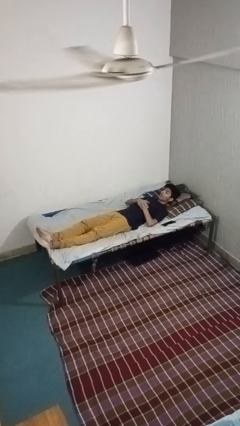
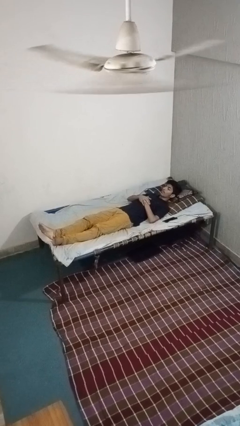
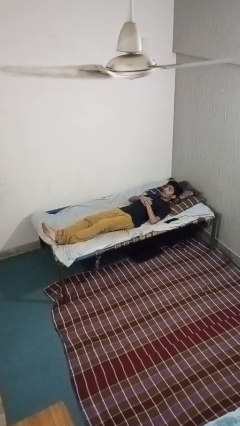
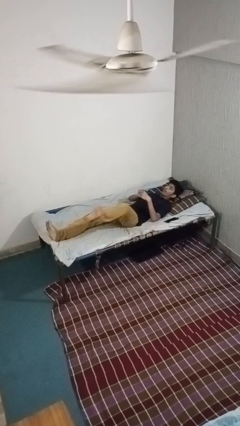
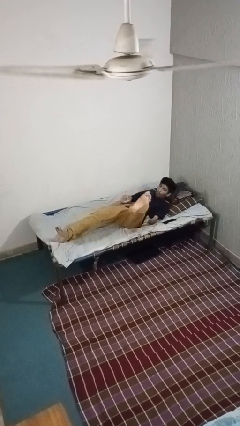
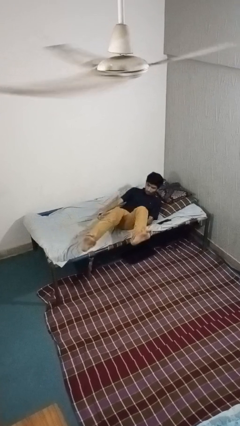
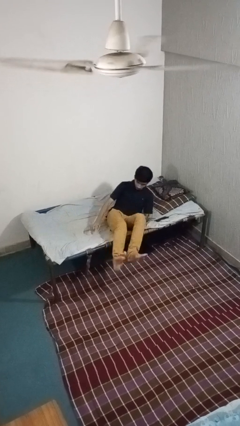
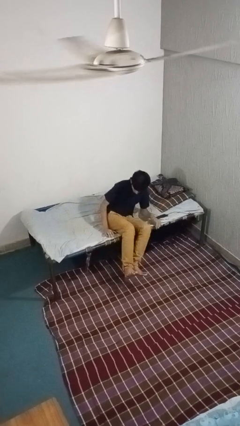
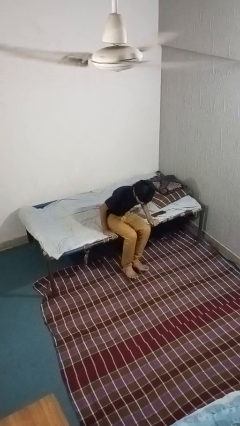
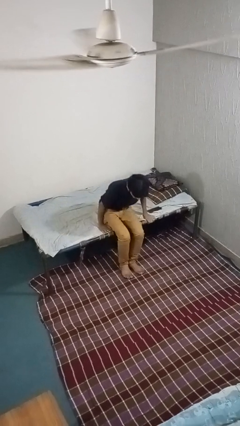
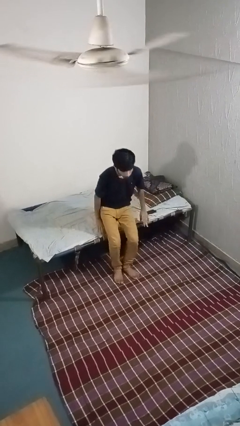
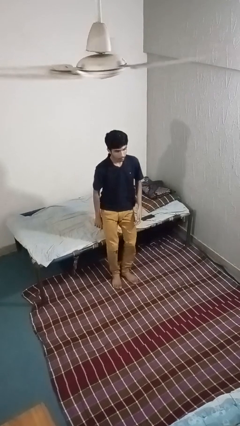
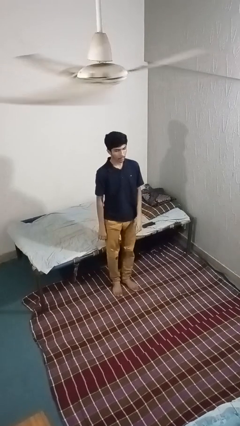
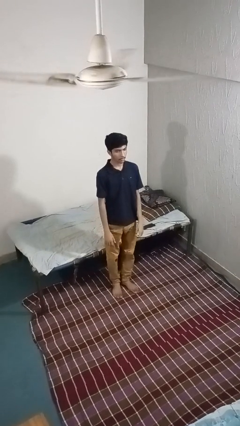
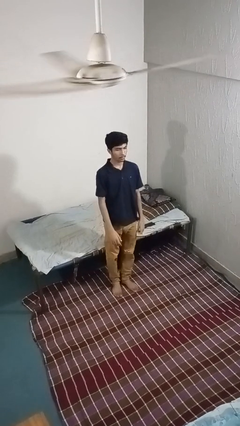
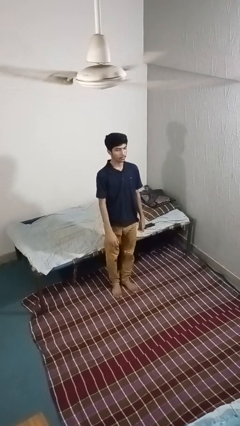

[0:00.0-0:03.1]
person stands up

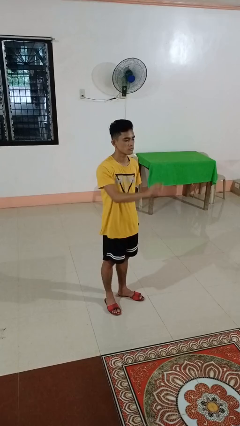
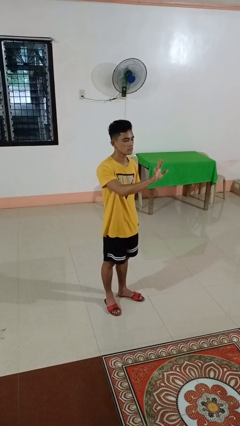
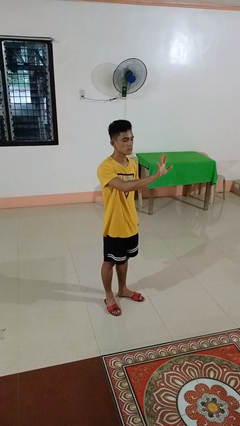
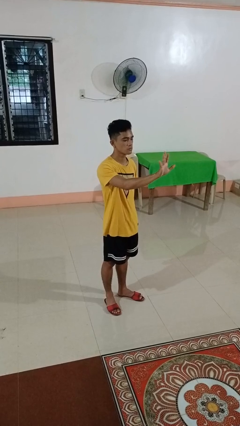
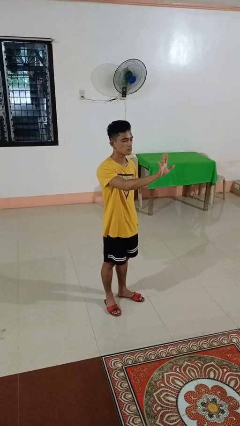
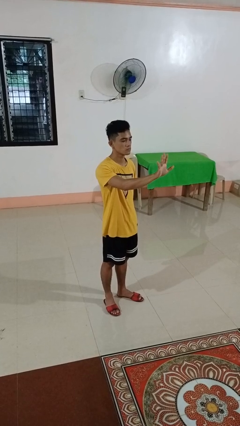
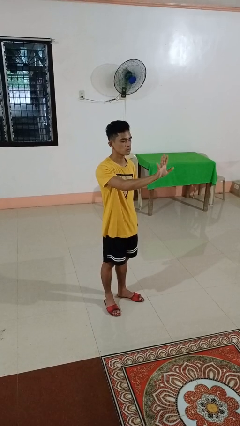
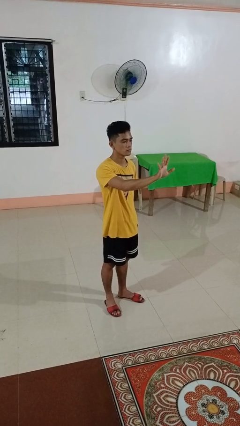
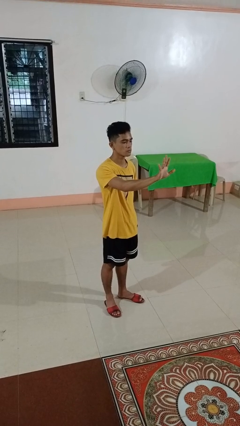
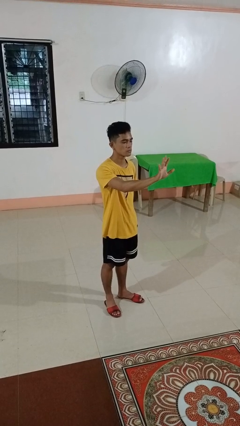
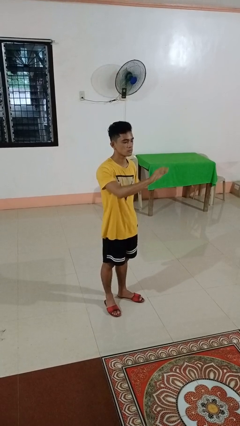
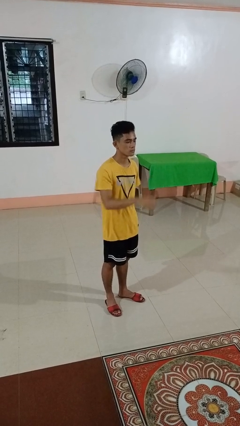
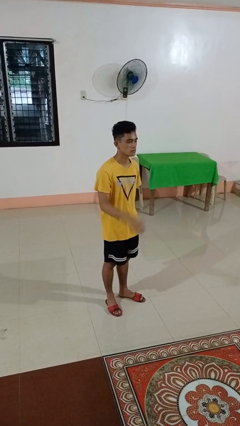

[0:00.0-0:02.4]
person gestures number five

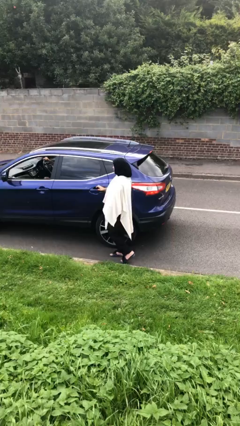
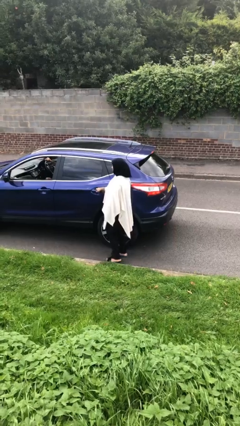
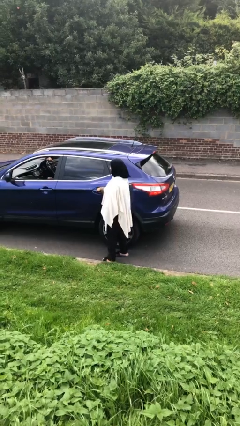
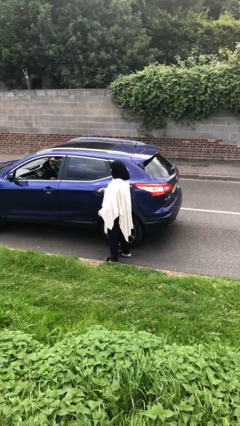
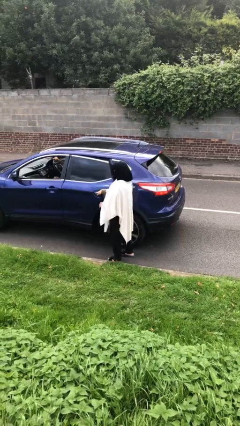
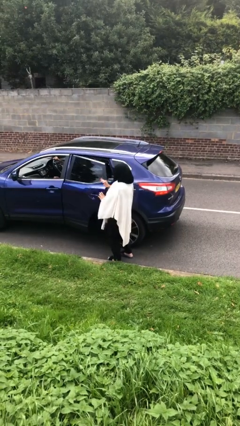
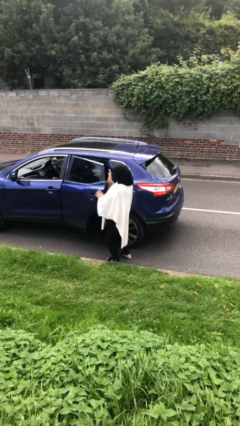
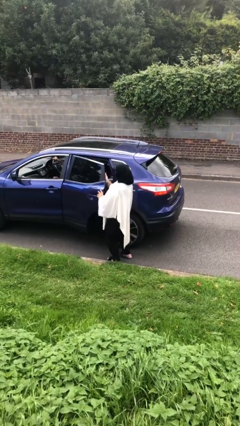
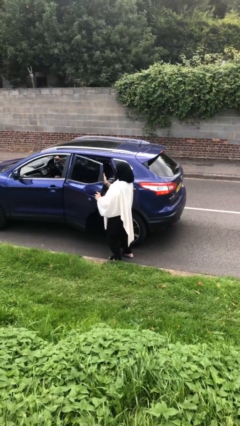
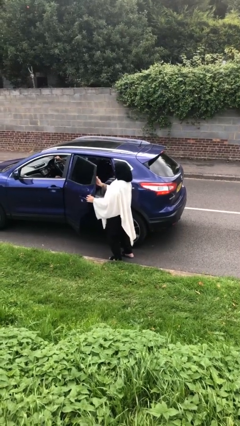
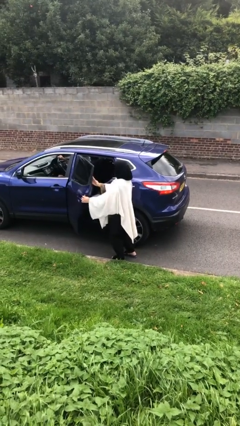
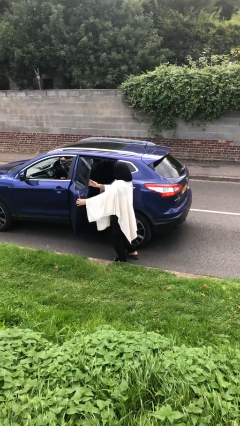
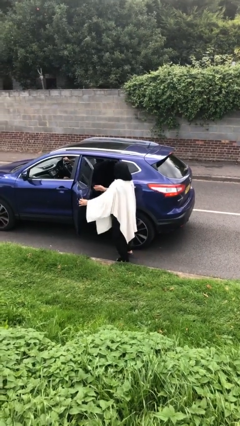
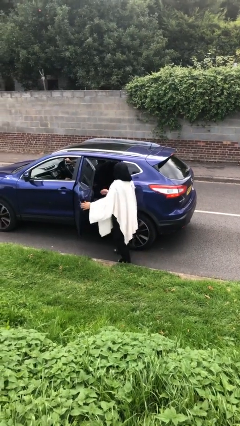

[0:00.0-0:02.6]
person opens car door

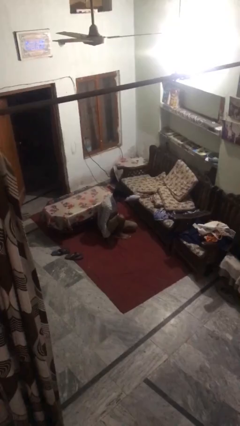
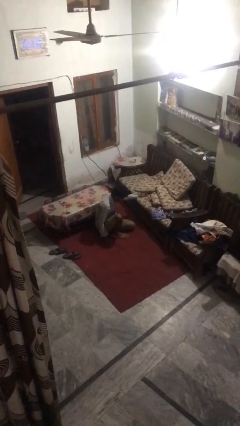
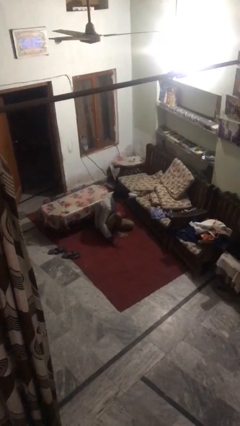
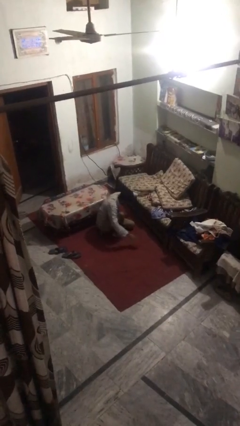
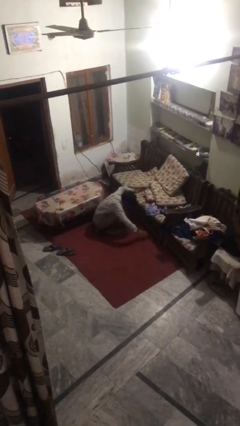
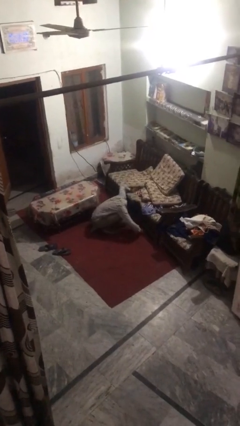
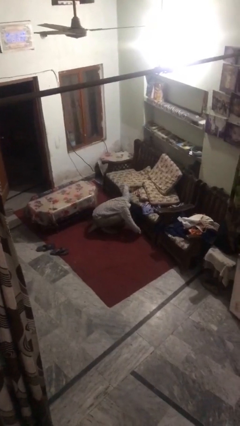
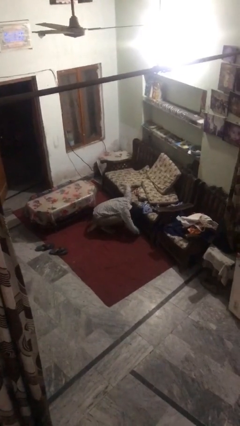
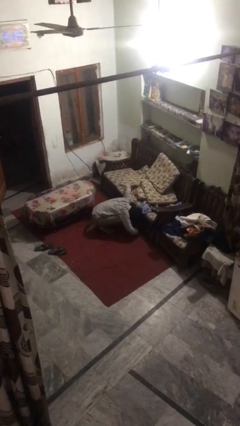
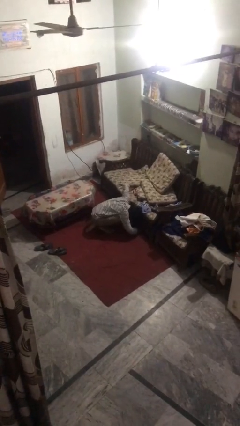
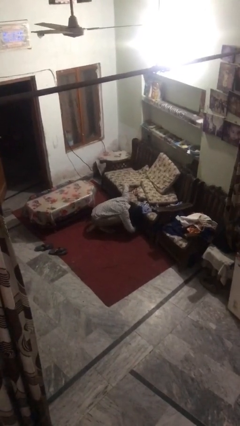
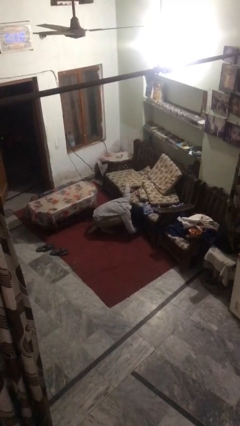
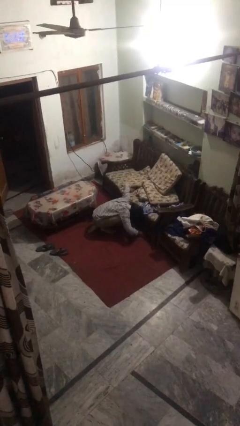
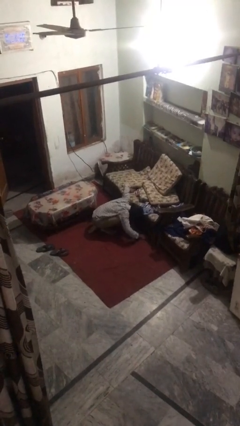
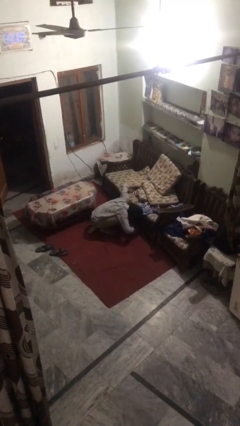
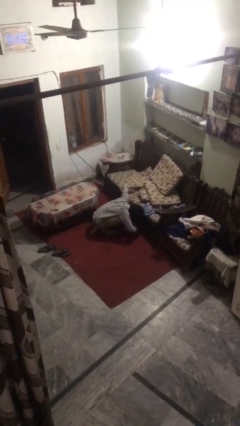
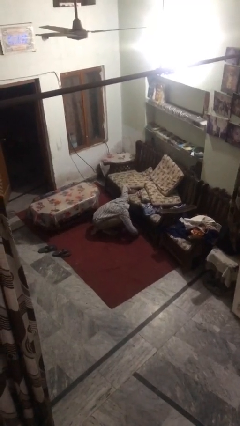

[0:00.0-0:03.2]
person searches under couch

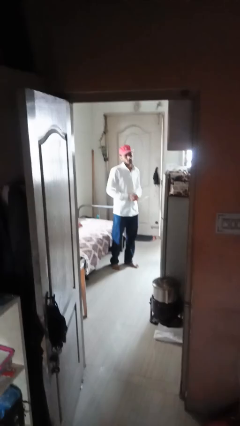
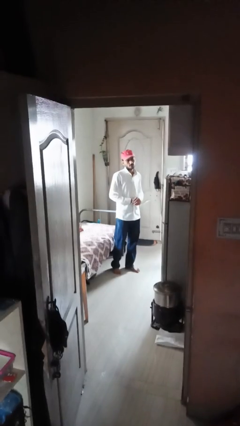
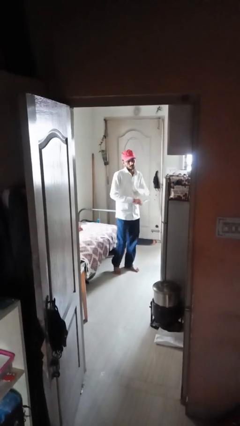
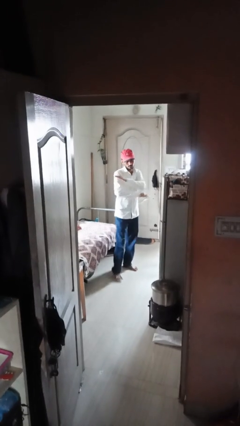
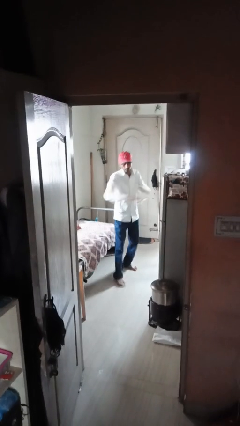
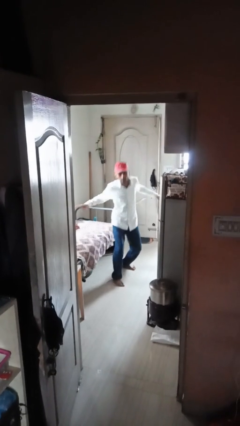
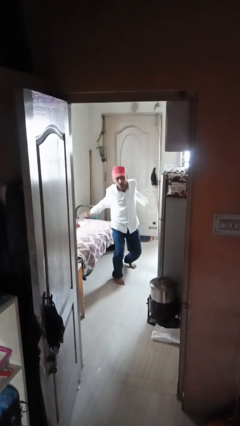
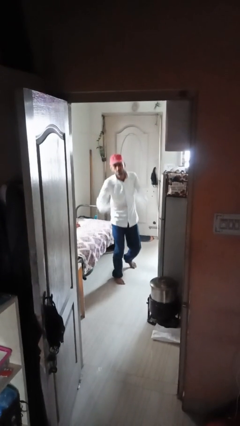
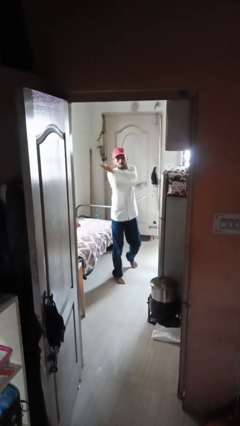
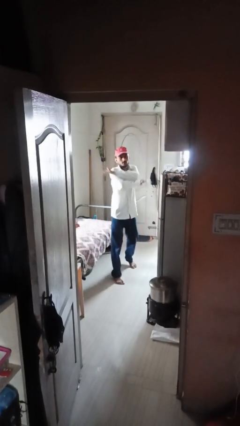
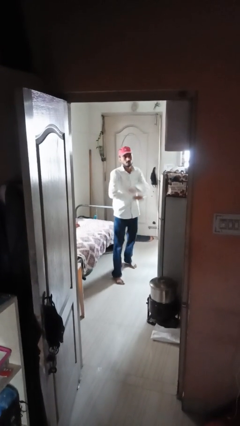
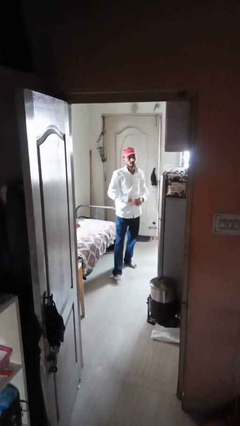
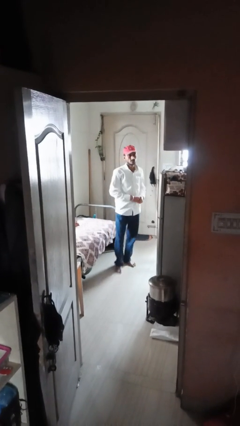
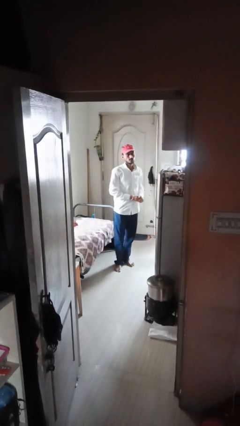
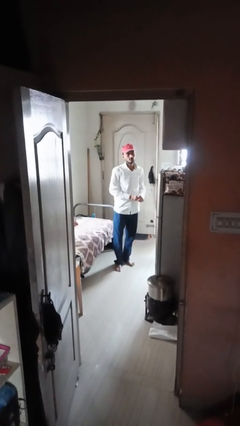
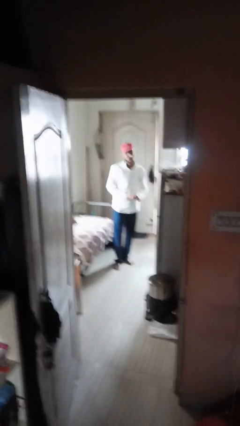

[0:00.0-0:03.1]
person karate chop

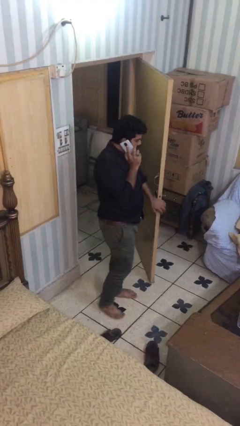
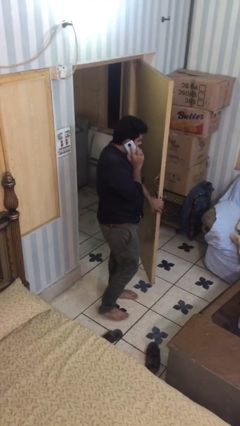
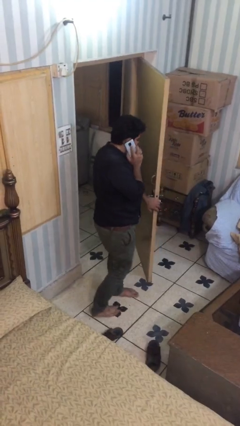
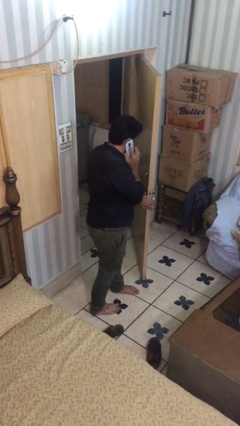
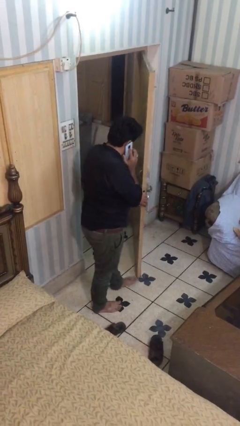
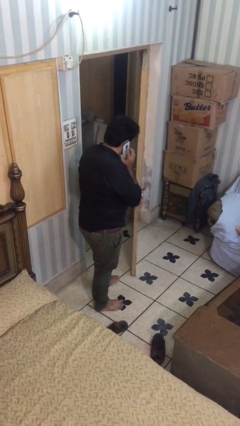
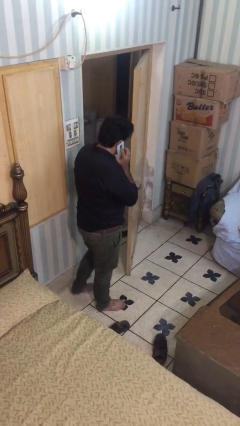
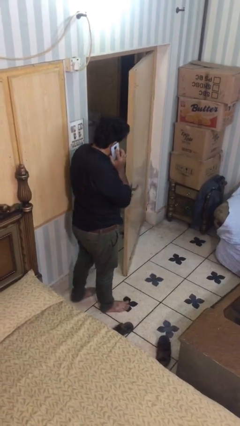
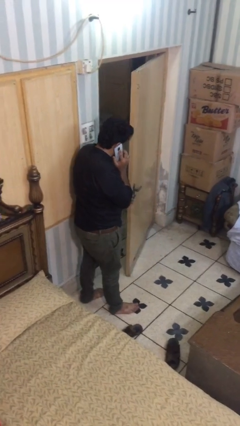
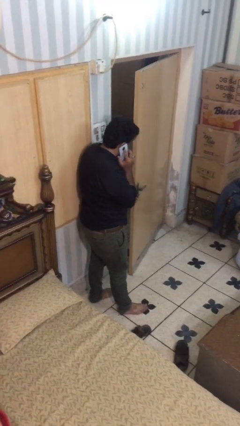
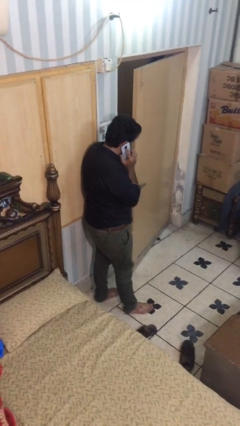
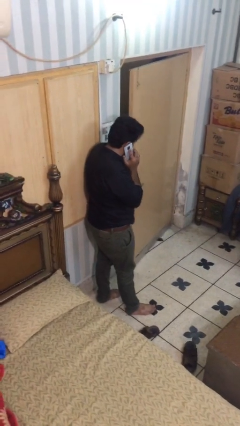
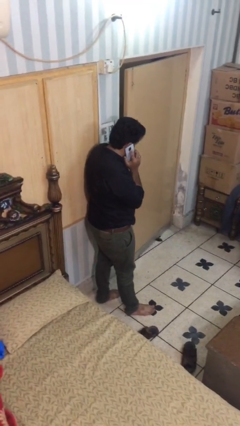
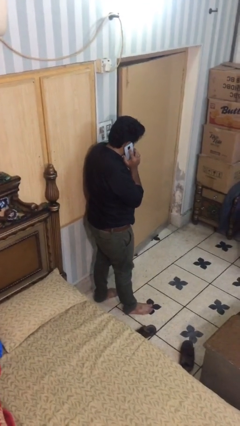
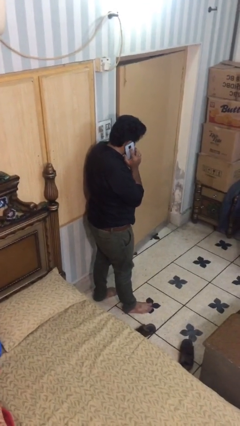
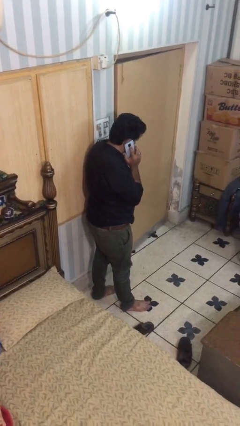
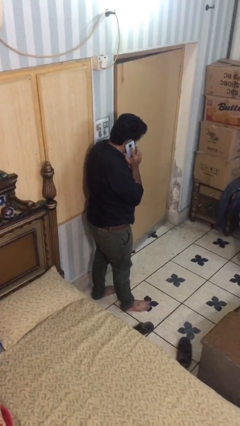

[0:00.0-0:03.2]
person closes facility door

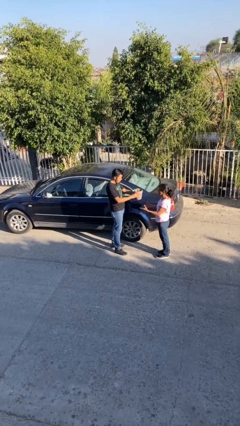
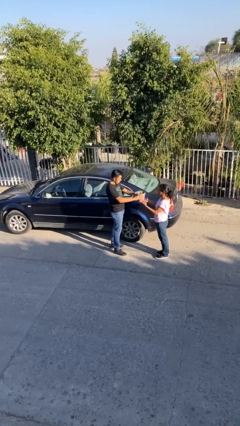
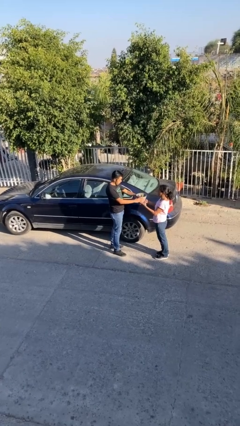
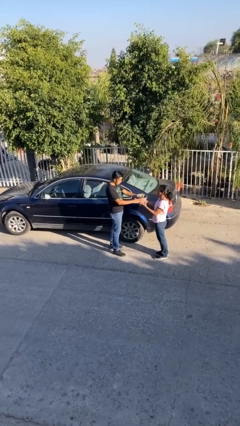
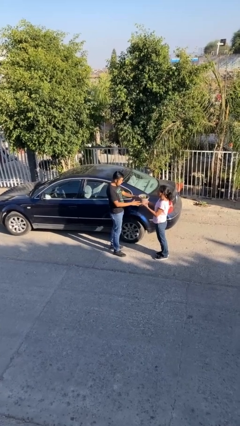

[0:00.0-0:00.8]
person transfers object to person
